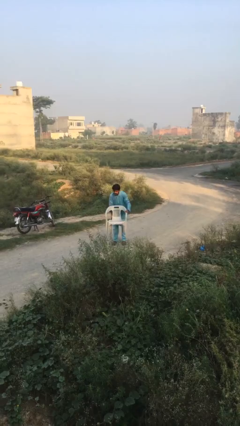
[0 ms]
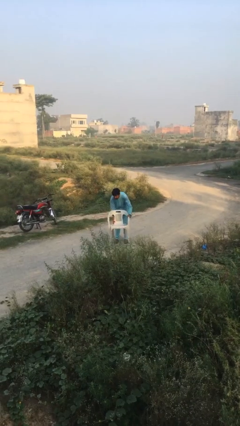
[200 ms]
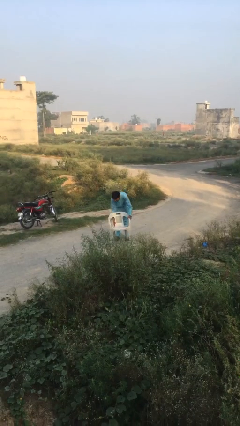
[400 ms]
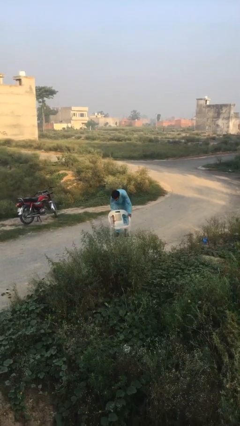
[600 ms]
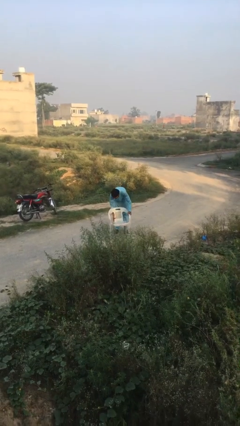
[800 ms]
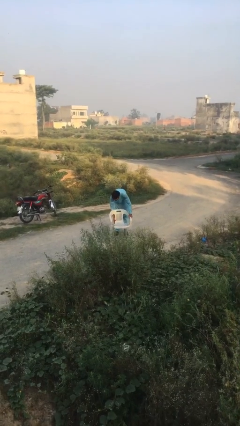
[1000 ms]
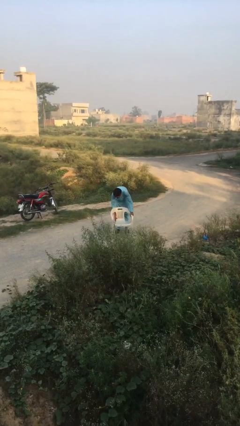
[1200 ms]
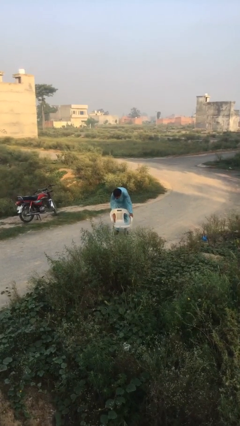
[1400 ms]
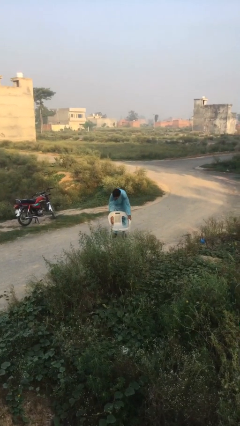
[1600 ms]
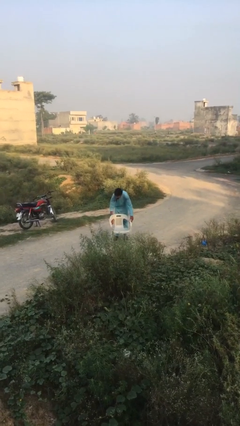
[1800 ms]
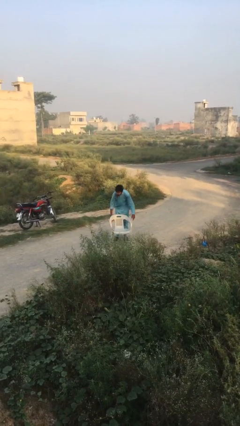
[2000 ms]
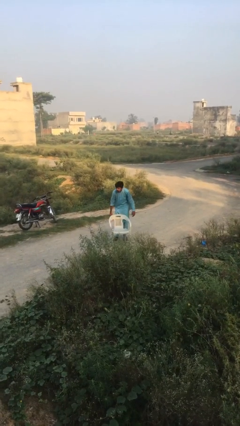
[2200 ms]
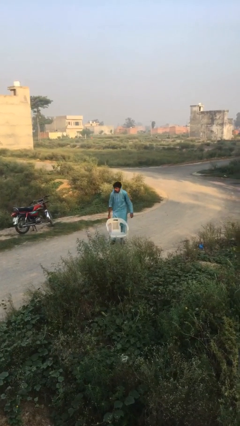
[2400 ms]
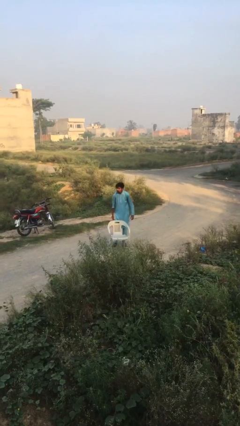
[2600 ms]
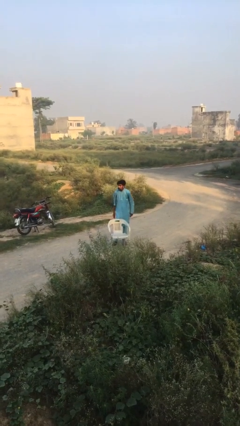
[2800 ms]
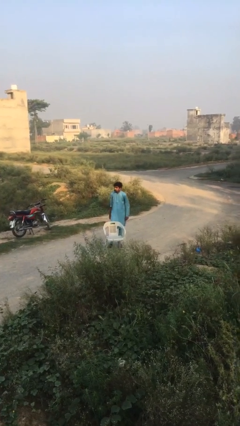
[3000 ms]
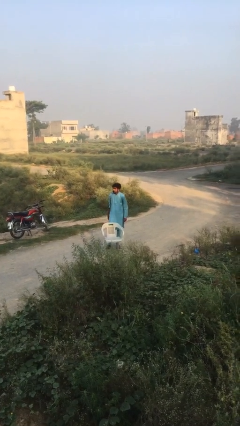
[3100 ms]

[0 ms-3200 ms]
person puts down object on floor

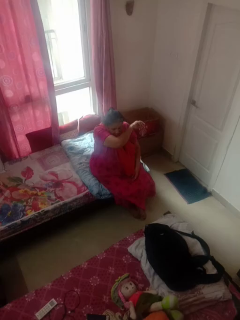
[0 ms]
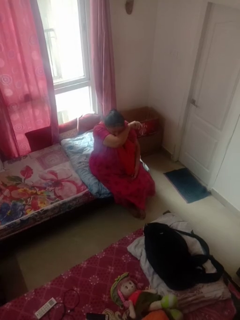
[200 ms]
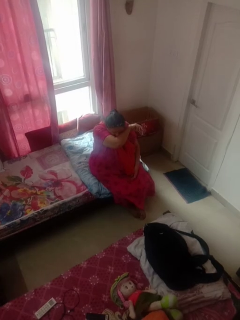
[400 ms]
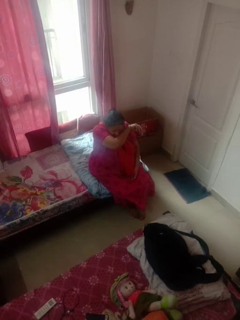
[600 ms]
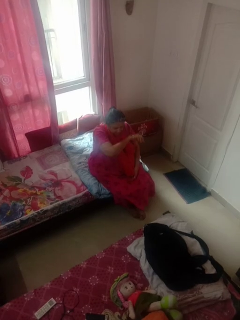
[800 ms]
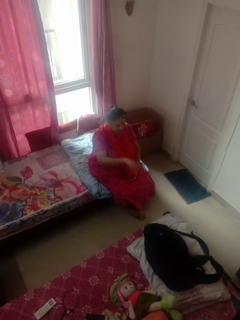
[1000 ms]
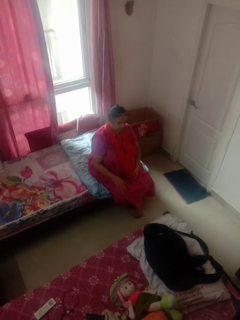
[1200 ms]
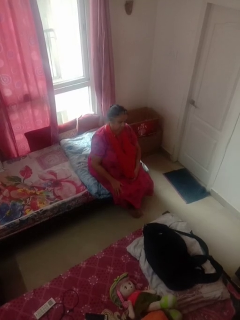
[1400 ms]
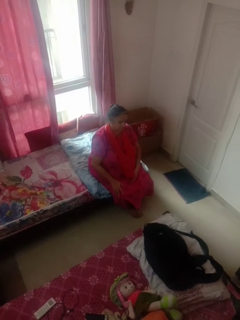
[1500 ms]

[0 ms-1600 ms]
person sneezes into arm

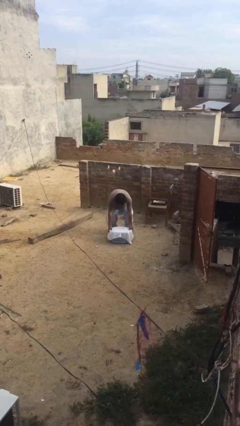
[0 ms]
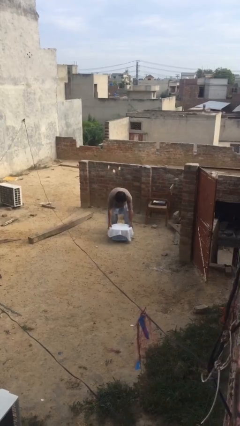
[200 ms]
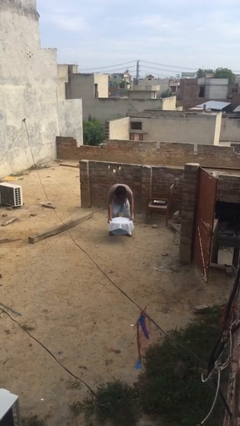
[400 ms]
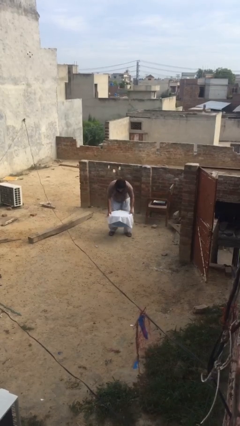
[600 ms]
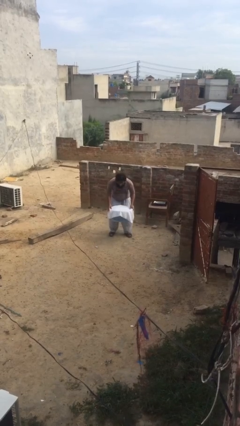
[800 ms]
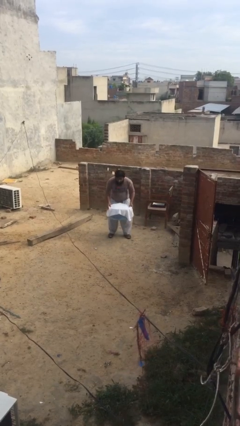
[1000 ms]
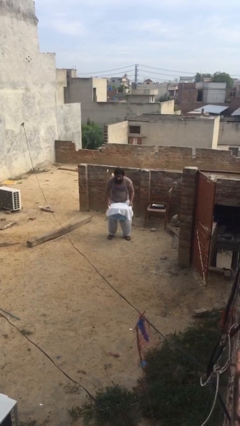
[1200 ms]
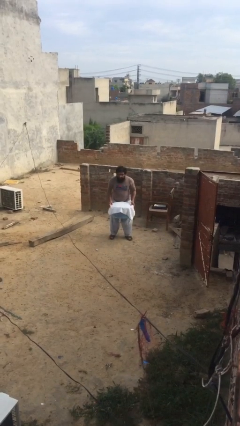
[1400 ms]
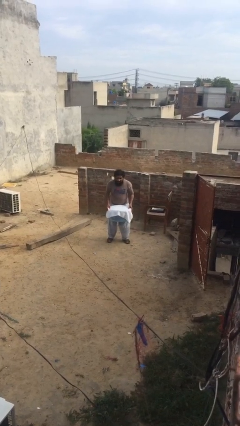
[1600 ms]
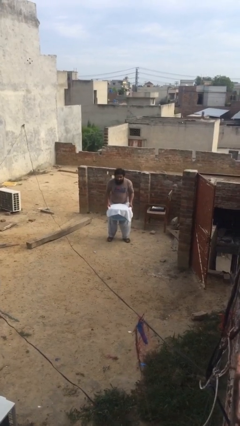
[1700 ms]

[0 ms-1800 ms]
person picks up object from floor

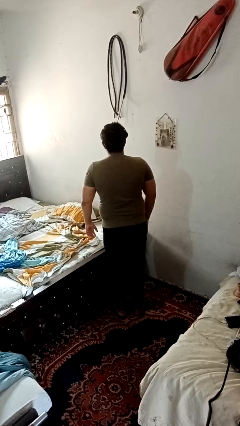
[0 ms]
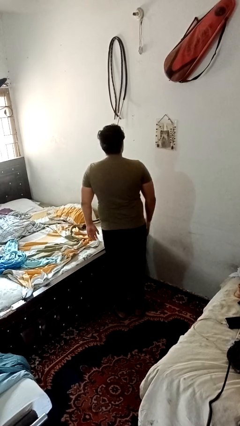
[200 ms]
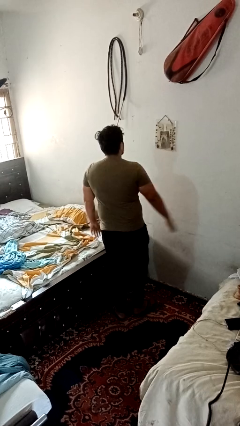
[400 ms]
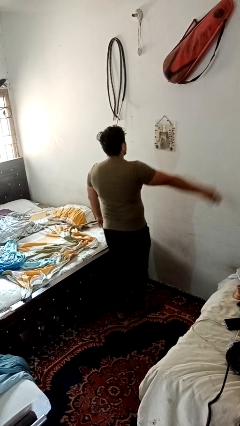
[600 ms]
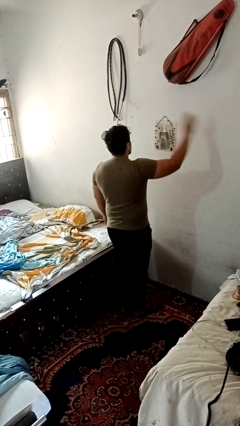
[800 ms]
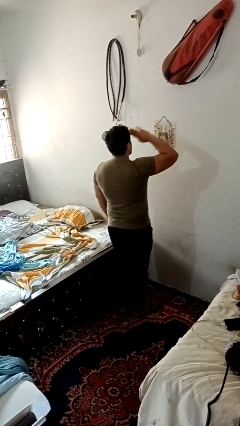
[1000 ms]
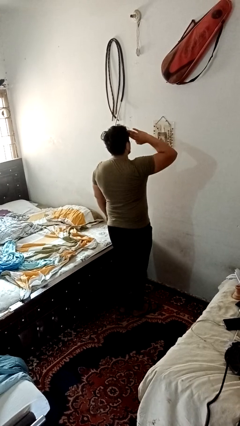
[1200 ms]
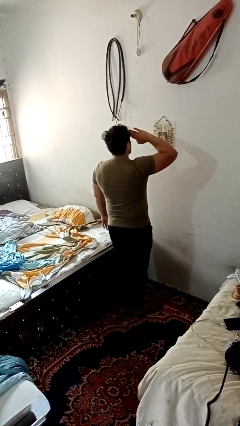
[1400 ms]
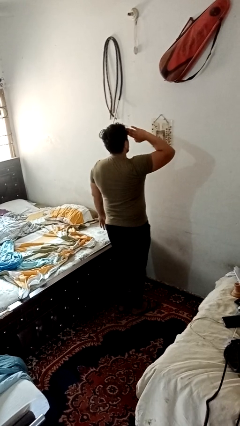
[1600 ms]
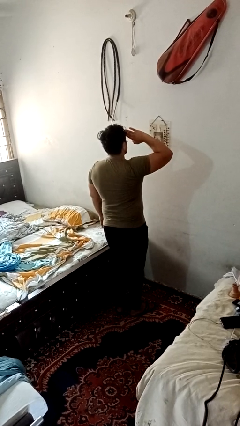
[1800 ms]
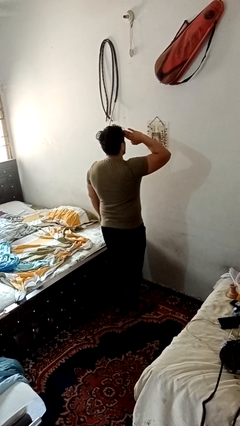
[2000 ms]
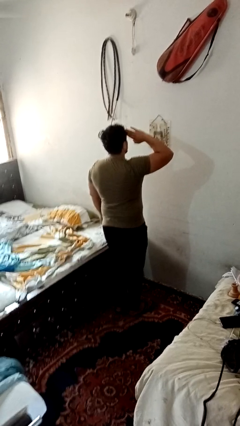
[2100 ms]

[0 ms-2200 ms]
person salutes

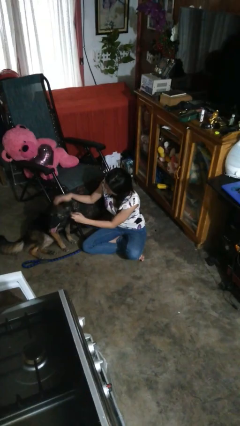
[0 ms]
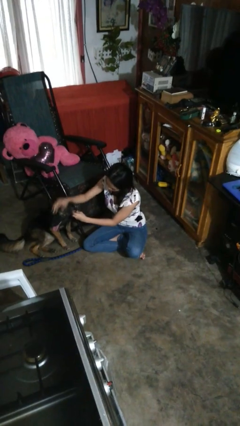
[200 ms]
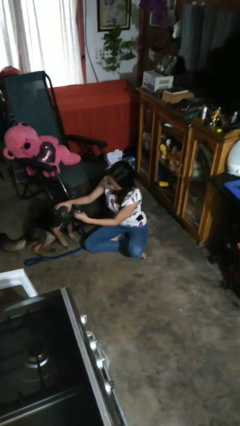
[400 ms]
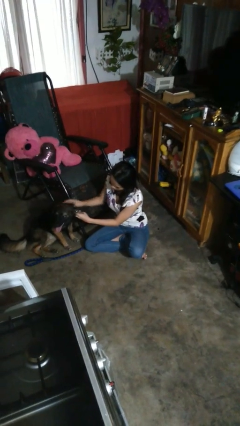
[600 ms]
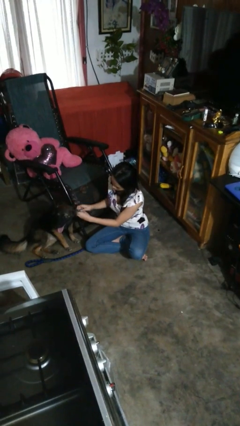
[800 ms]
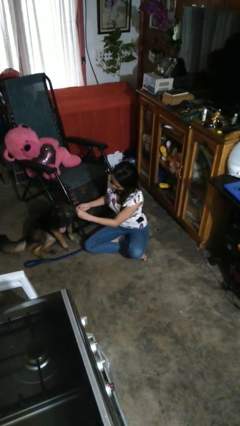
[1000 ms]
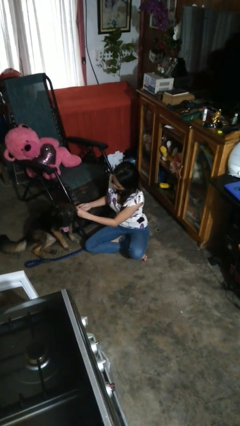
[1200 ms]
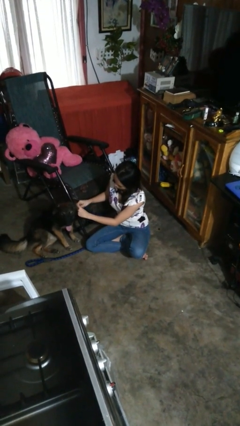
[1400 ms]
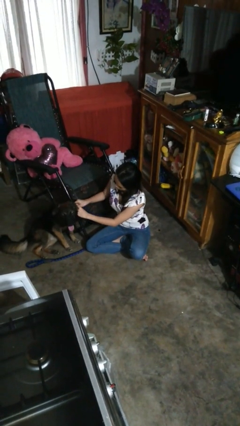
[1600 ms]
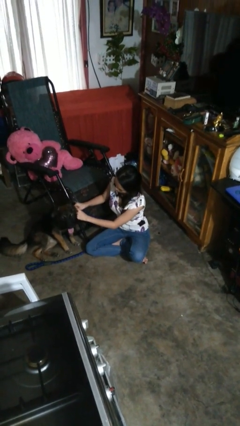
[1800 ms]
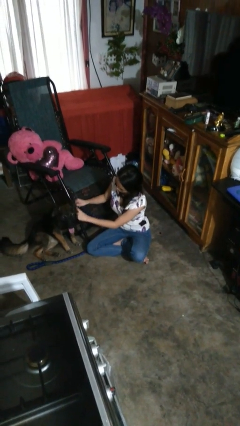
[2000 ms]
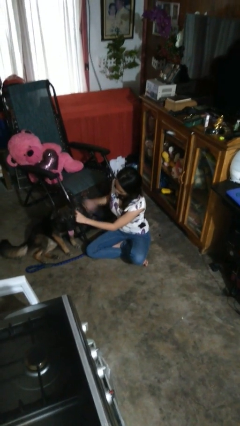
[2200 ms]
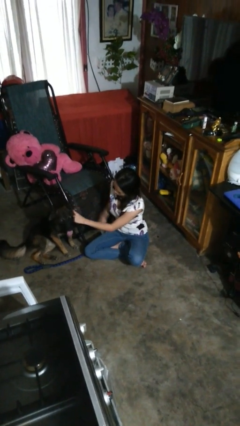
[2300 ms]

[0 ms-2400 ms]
person unattaches leash from dog

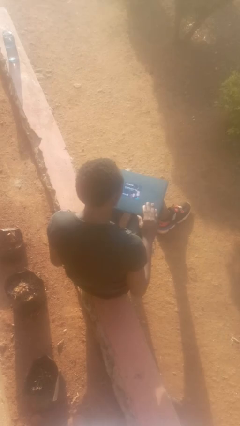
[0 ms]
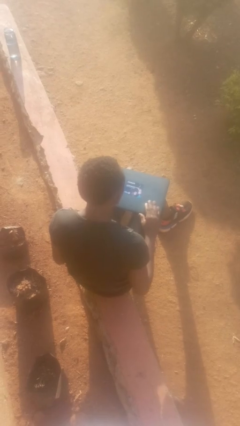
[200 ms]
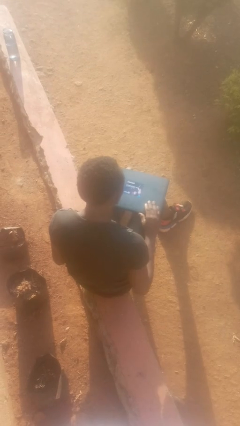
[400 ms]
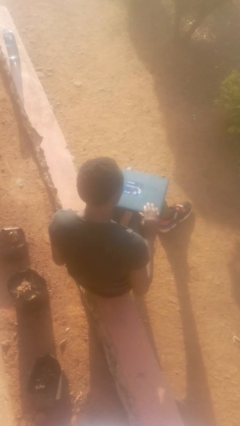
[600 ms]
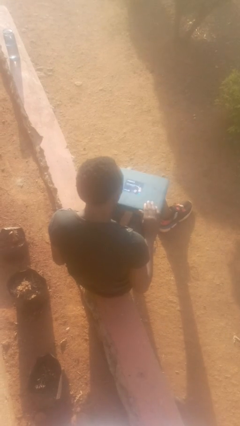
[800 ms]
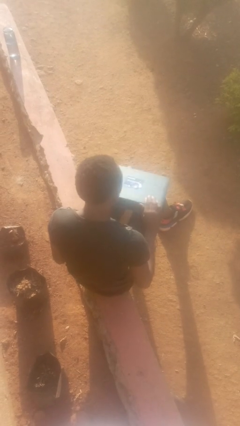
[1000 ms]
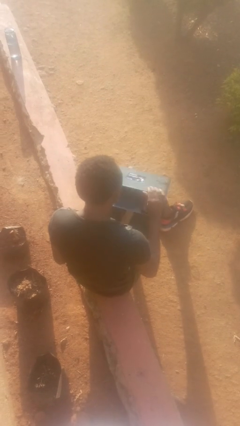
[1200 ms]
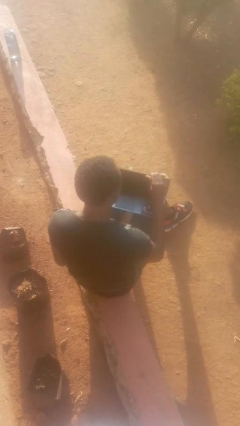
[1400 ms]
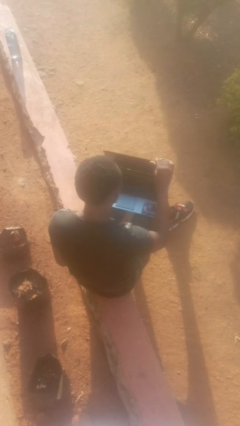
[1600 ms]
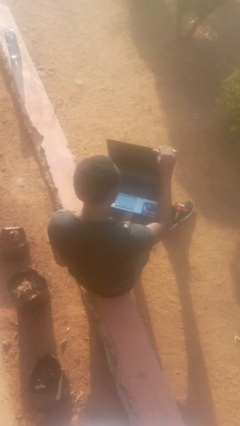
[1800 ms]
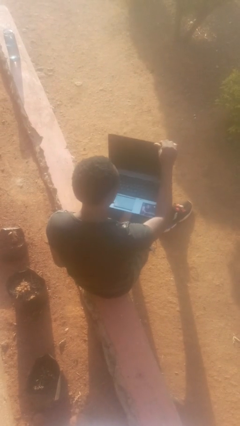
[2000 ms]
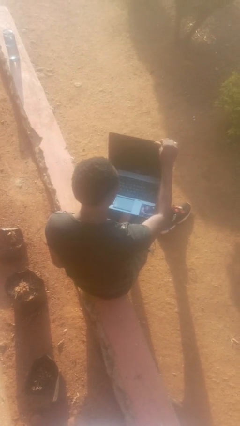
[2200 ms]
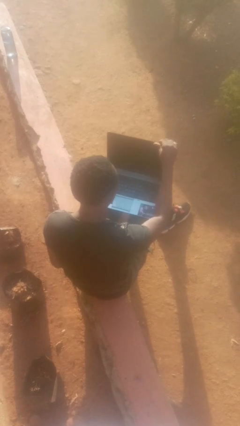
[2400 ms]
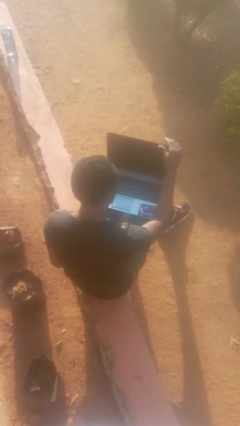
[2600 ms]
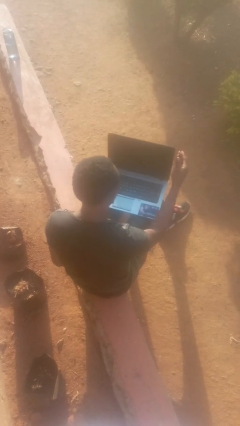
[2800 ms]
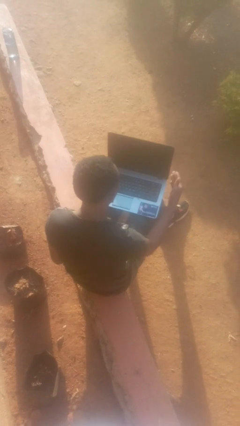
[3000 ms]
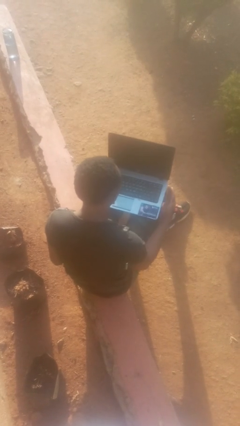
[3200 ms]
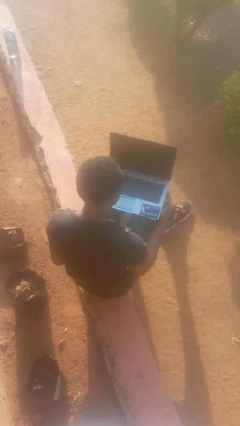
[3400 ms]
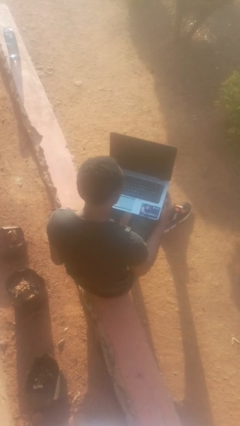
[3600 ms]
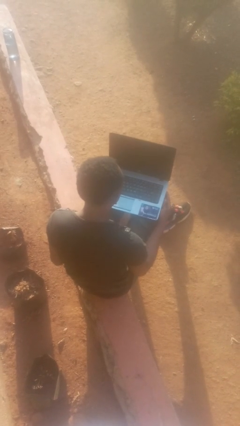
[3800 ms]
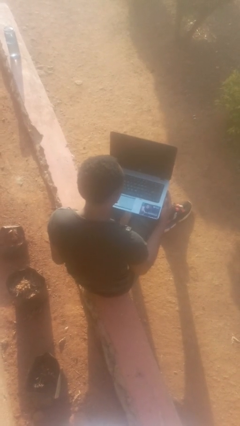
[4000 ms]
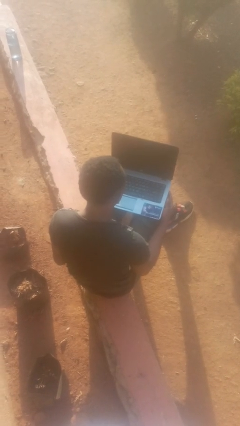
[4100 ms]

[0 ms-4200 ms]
person opens laptop

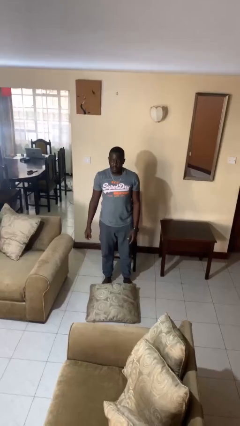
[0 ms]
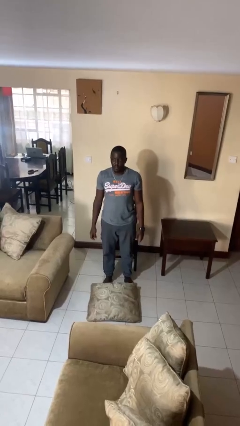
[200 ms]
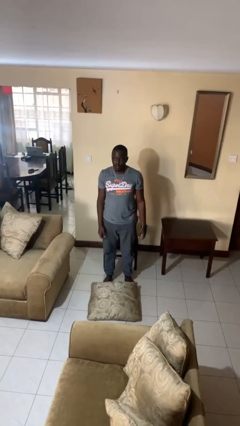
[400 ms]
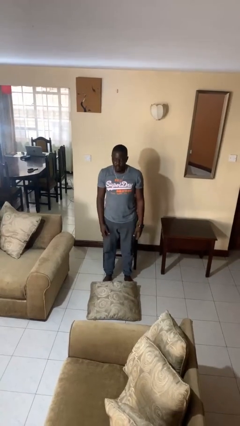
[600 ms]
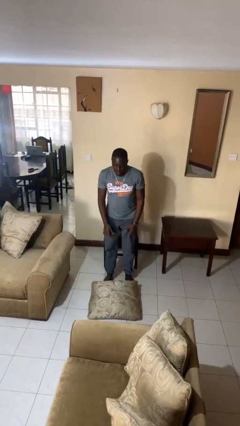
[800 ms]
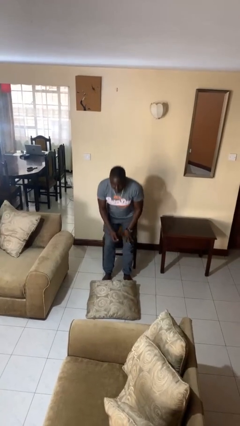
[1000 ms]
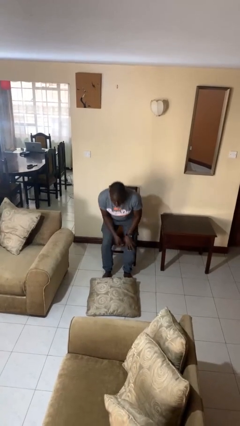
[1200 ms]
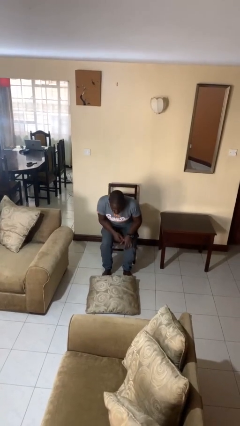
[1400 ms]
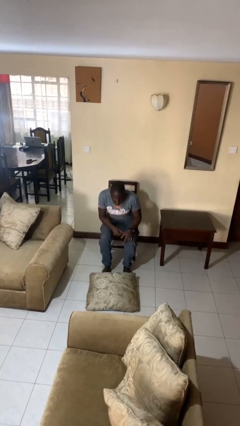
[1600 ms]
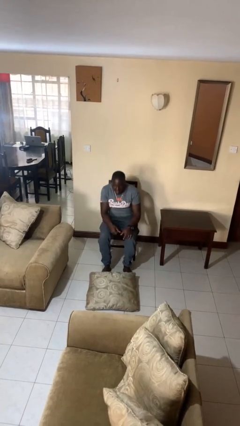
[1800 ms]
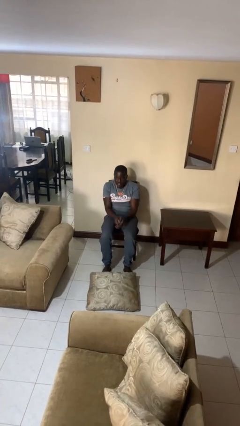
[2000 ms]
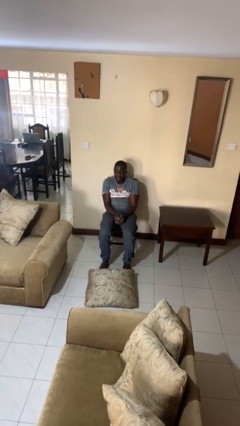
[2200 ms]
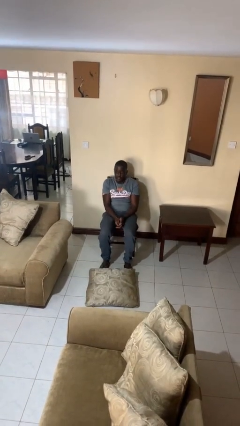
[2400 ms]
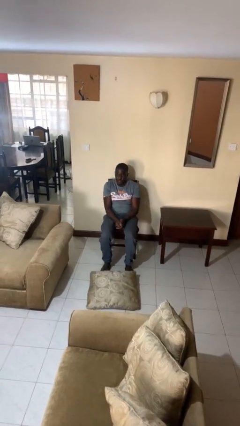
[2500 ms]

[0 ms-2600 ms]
person sits down
